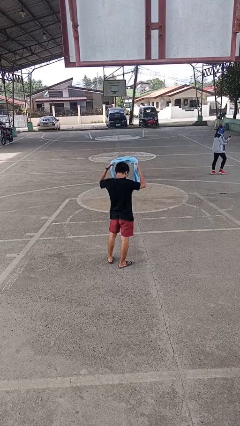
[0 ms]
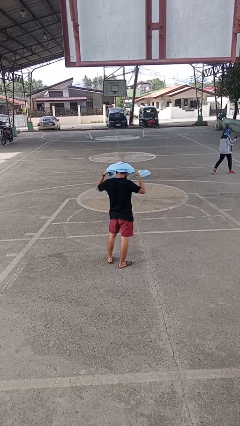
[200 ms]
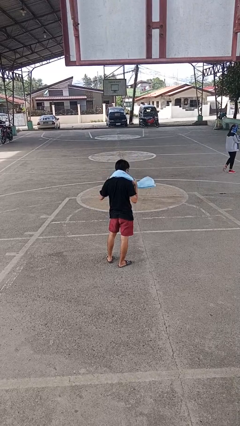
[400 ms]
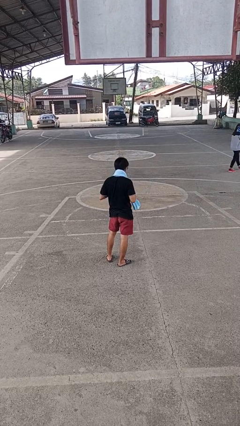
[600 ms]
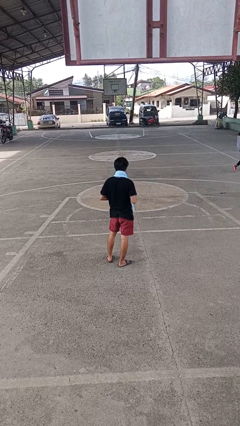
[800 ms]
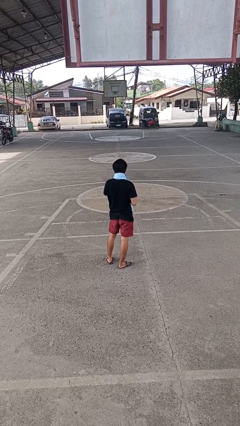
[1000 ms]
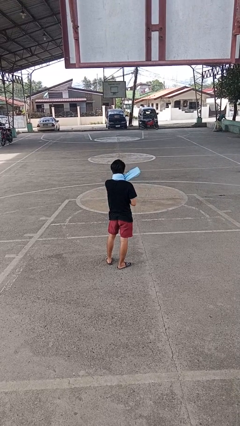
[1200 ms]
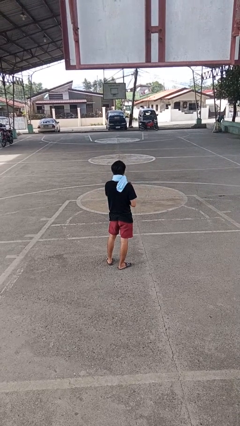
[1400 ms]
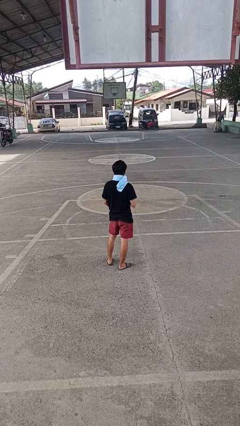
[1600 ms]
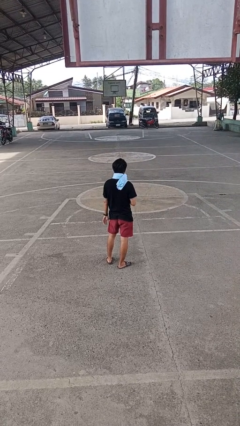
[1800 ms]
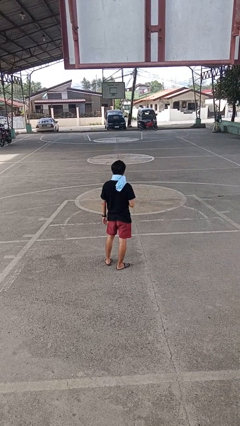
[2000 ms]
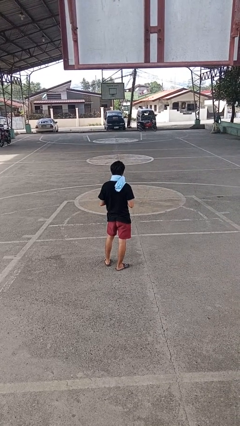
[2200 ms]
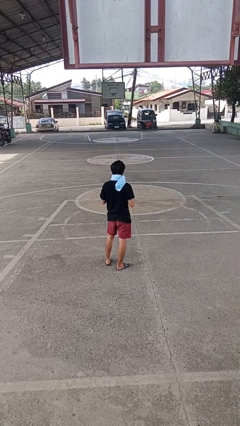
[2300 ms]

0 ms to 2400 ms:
person puts on scarf

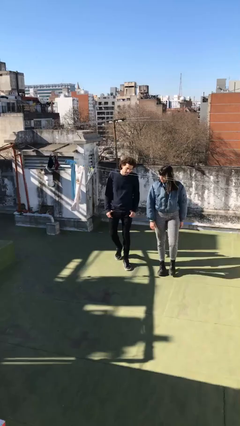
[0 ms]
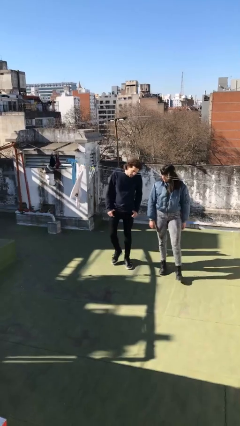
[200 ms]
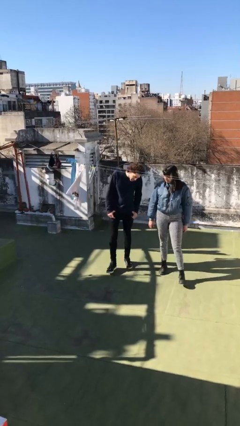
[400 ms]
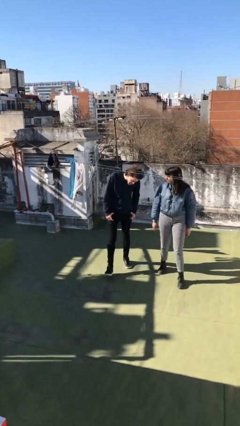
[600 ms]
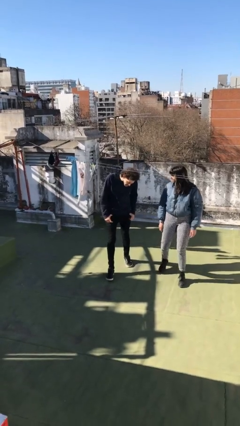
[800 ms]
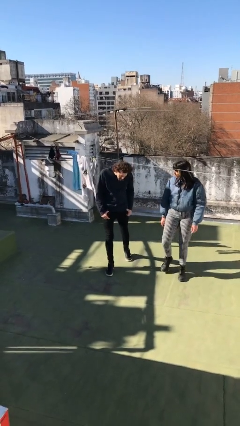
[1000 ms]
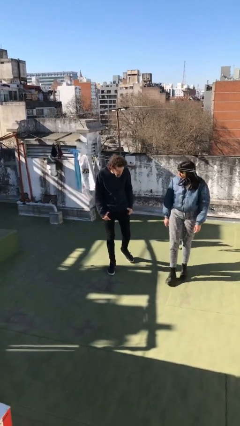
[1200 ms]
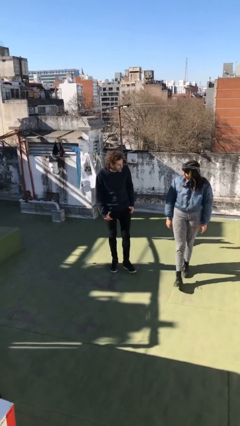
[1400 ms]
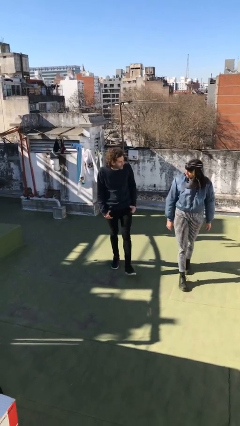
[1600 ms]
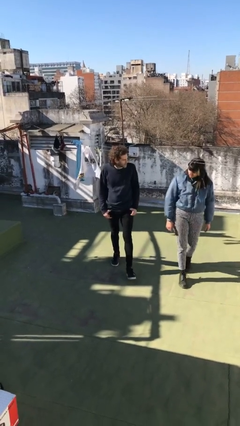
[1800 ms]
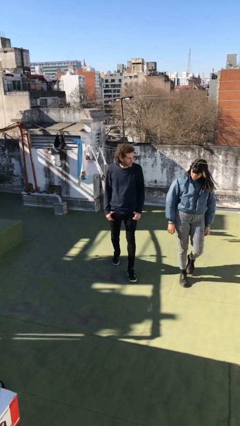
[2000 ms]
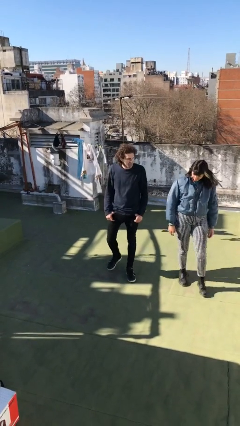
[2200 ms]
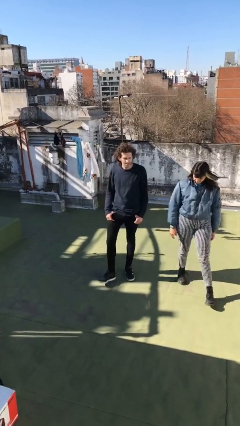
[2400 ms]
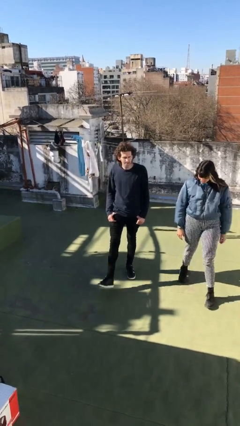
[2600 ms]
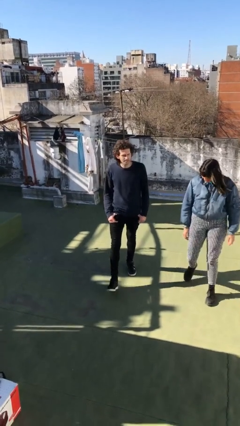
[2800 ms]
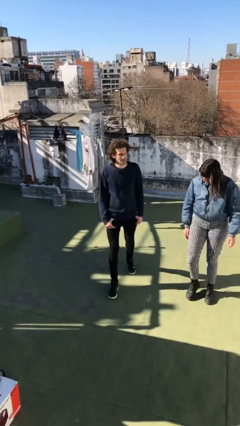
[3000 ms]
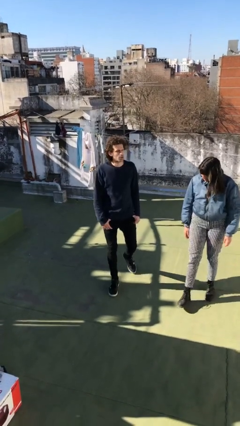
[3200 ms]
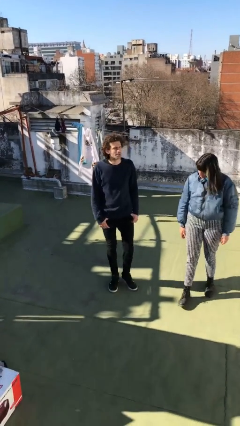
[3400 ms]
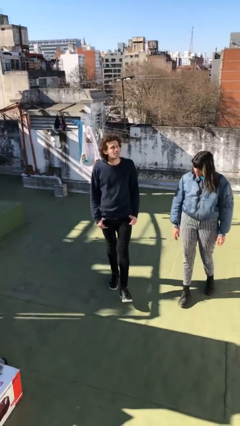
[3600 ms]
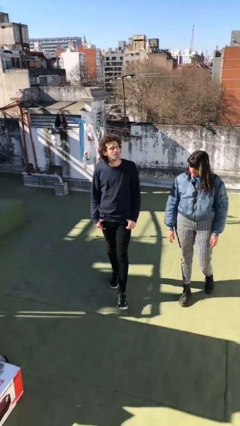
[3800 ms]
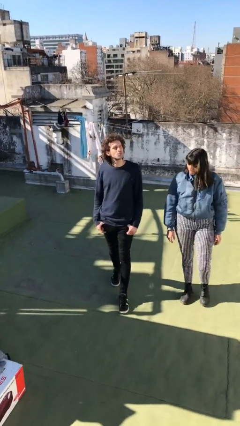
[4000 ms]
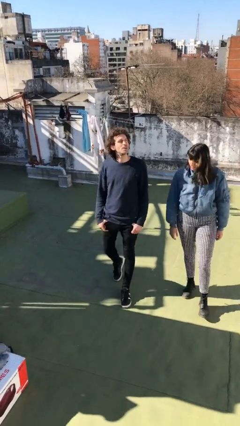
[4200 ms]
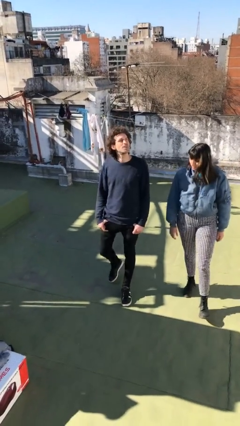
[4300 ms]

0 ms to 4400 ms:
person talks to person

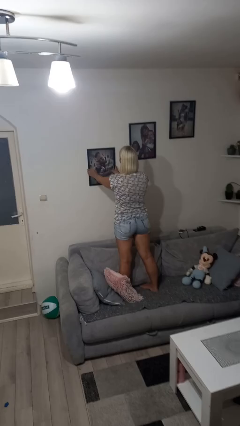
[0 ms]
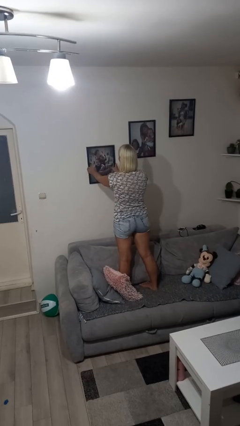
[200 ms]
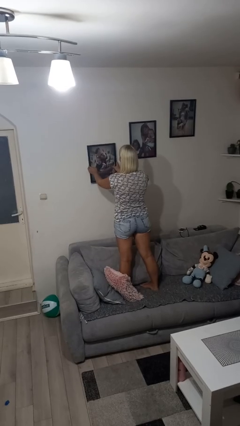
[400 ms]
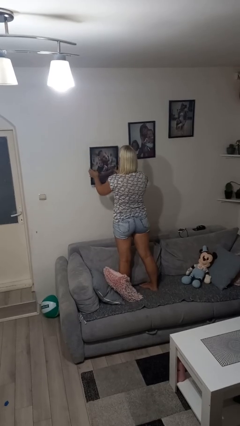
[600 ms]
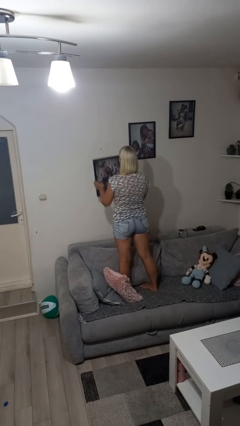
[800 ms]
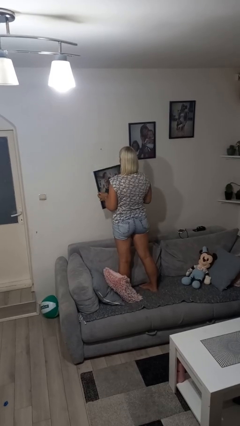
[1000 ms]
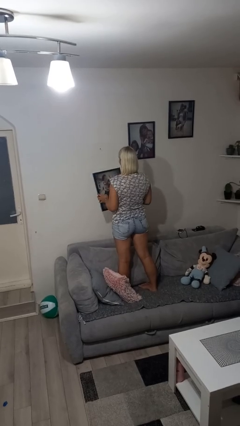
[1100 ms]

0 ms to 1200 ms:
person takes down picture frame

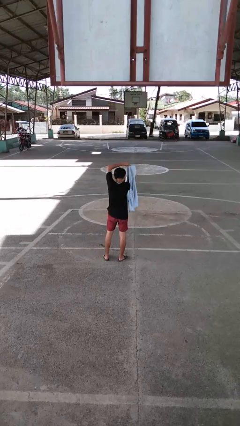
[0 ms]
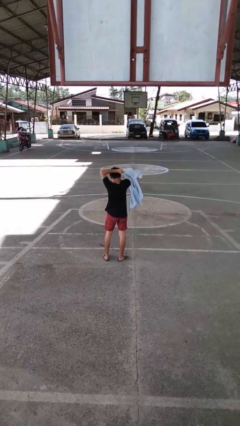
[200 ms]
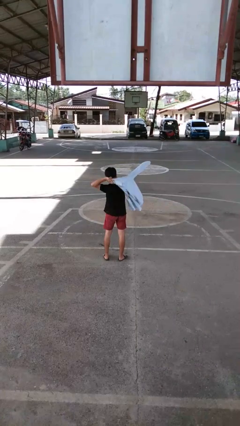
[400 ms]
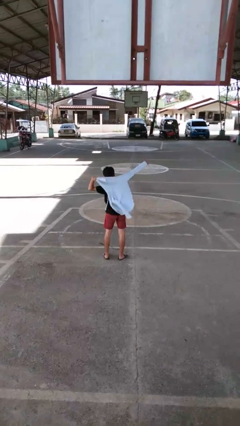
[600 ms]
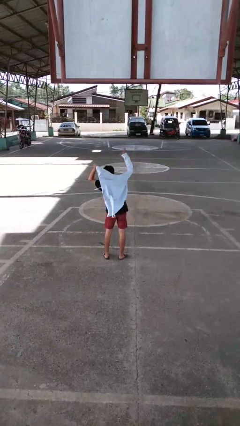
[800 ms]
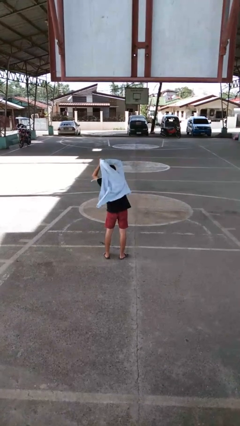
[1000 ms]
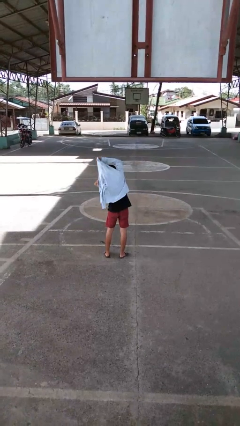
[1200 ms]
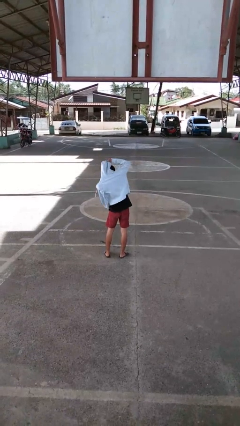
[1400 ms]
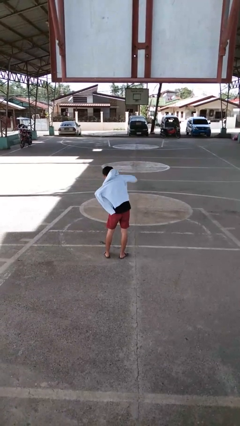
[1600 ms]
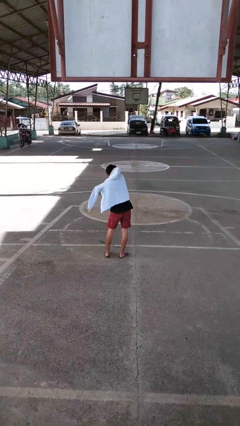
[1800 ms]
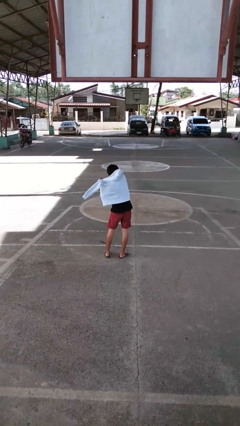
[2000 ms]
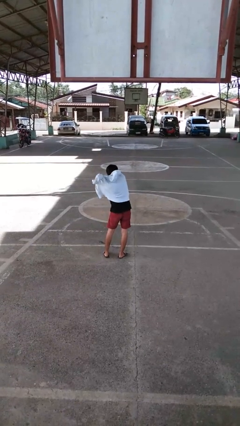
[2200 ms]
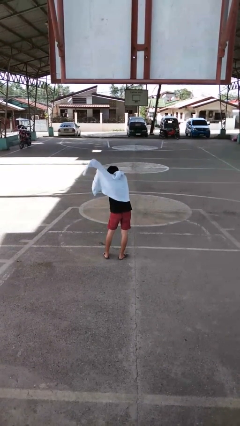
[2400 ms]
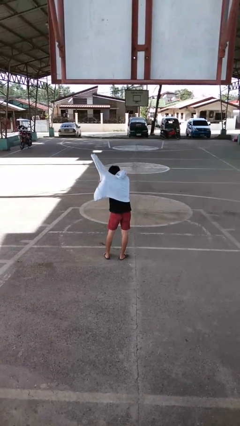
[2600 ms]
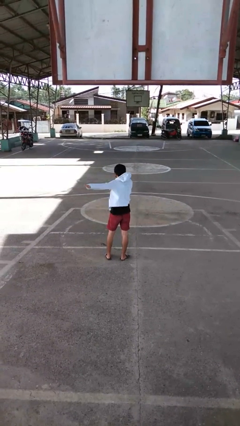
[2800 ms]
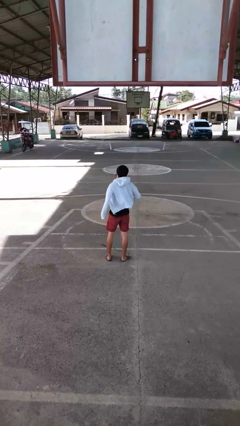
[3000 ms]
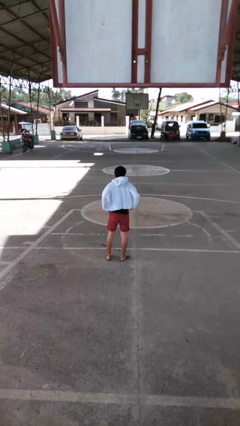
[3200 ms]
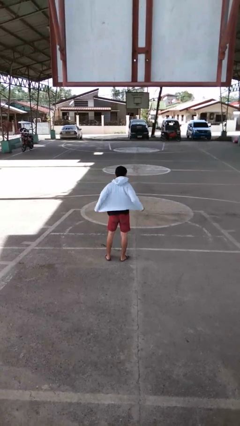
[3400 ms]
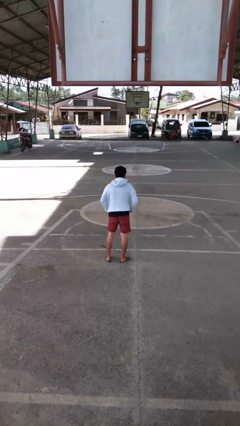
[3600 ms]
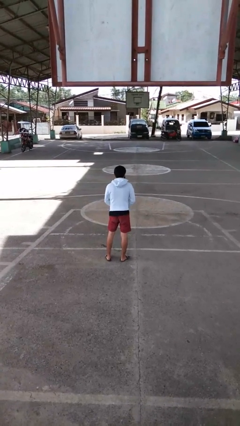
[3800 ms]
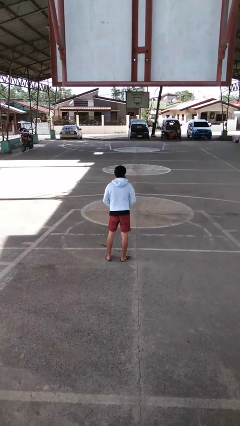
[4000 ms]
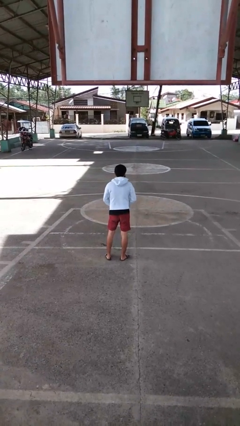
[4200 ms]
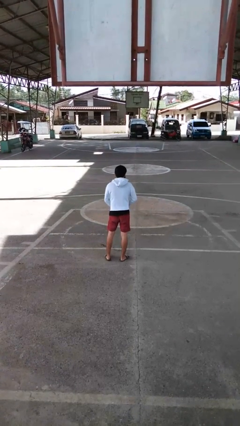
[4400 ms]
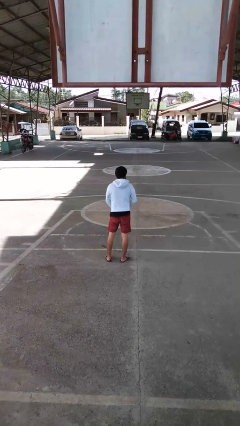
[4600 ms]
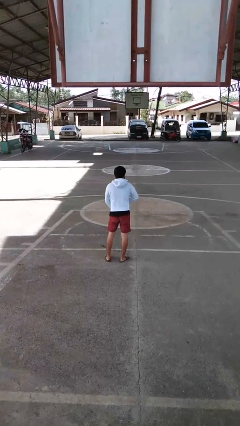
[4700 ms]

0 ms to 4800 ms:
person puts on jacket

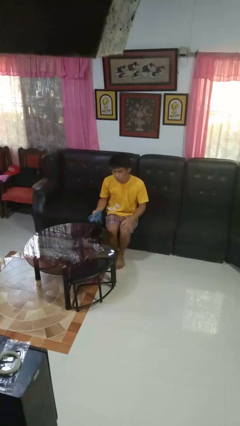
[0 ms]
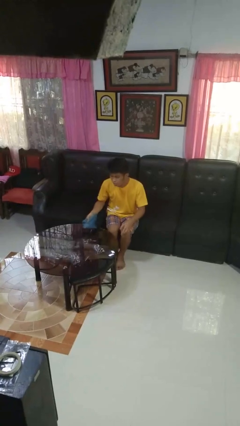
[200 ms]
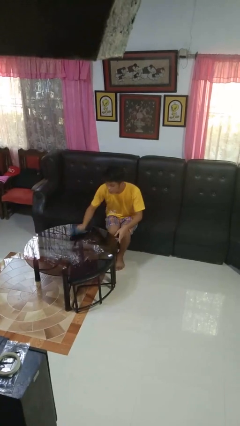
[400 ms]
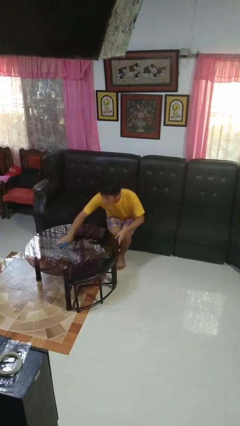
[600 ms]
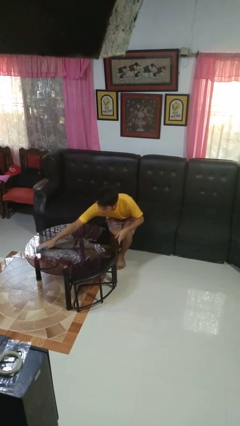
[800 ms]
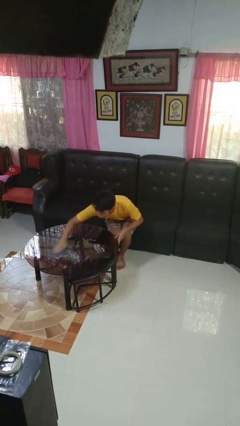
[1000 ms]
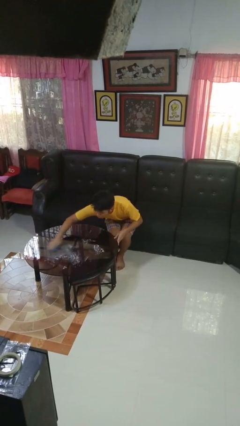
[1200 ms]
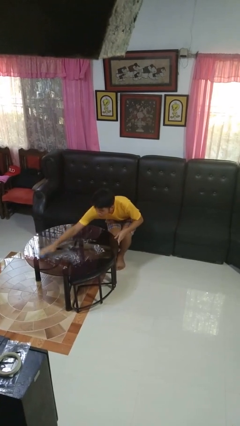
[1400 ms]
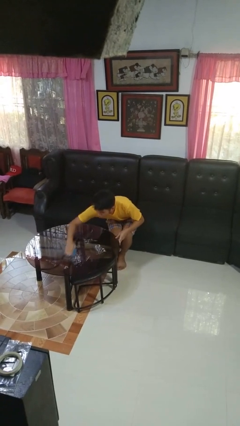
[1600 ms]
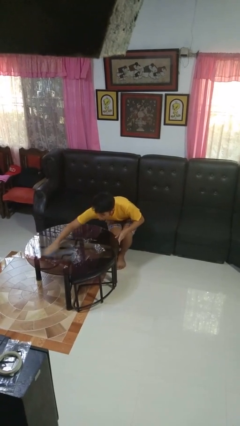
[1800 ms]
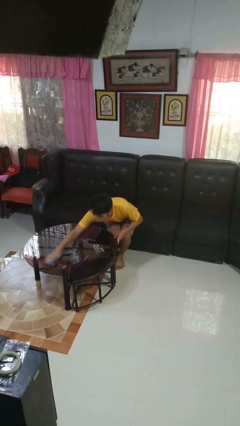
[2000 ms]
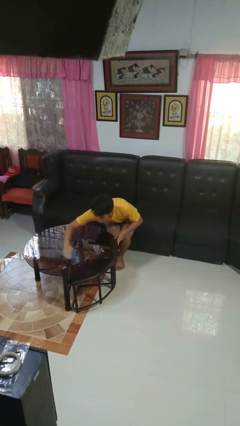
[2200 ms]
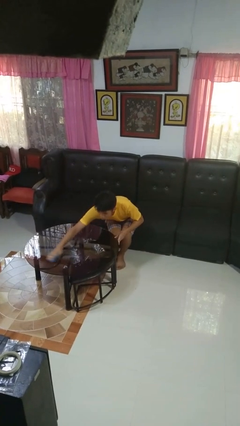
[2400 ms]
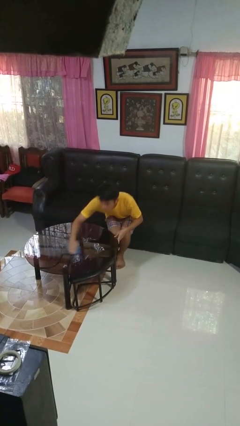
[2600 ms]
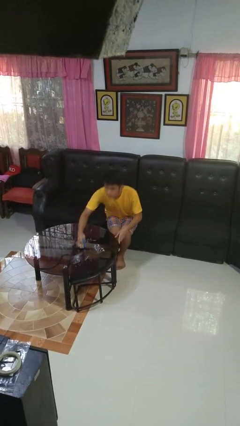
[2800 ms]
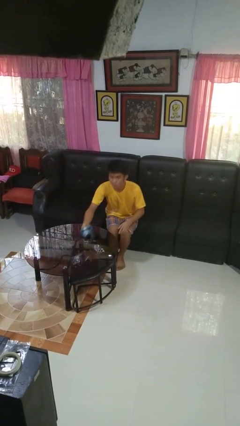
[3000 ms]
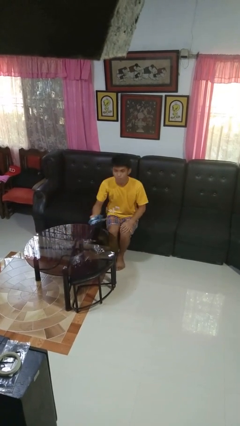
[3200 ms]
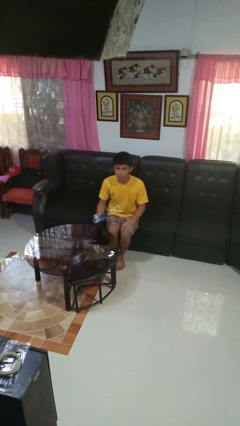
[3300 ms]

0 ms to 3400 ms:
person cleans table with rag

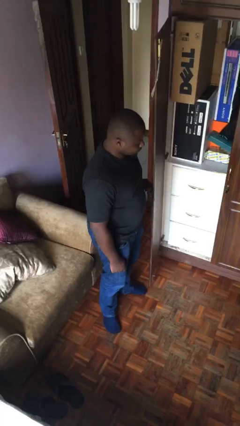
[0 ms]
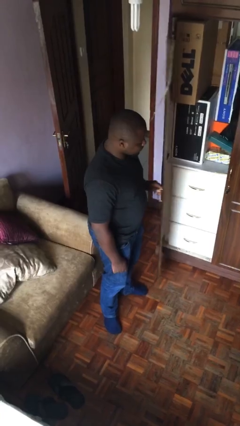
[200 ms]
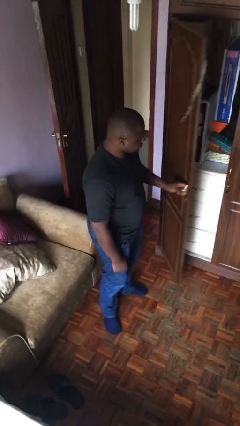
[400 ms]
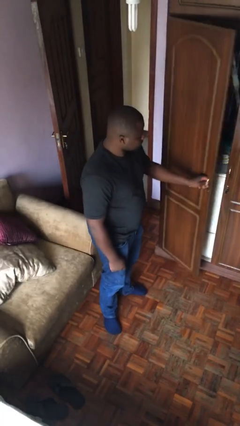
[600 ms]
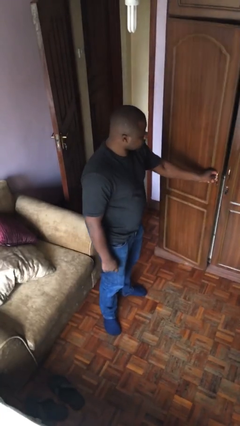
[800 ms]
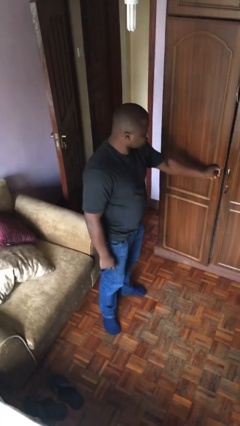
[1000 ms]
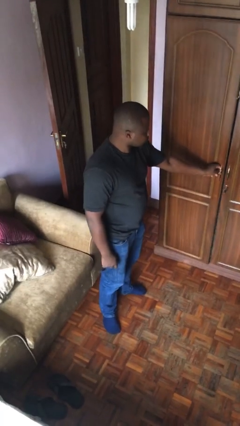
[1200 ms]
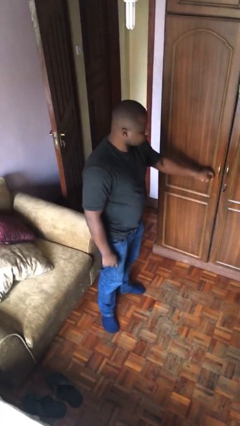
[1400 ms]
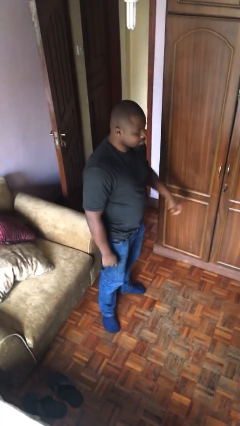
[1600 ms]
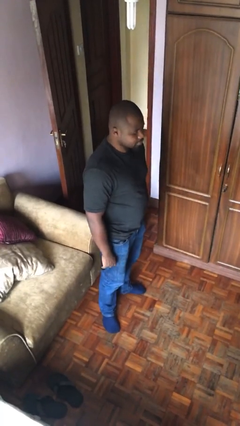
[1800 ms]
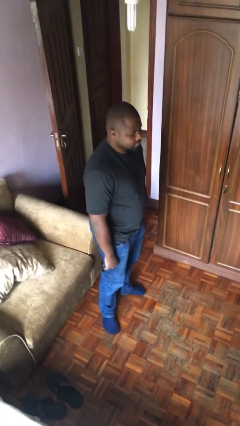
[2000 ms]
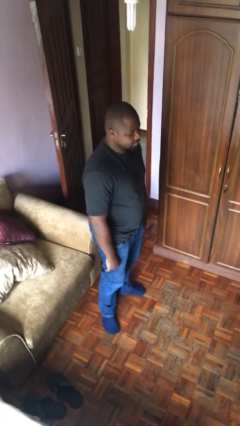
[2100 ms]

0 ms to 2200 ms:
person closes dresser drawer
